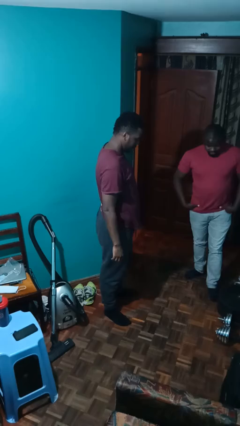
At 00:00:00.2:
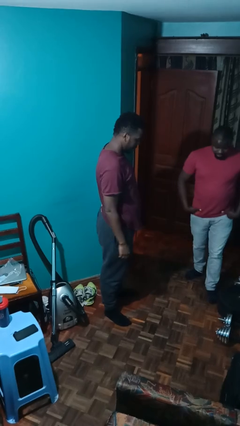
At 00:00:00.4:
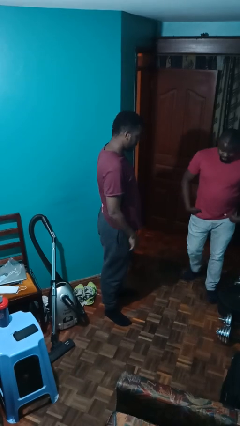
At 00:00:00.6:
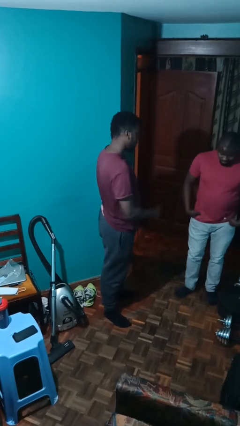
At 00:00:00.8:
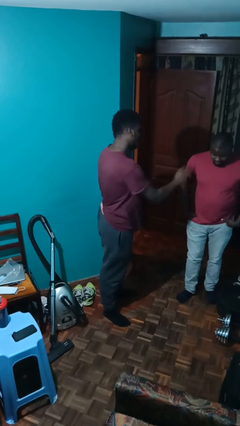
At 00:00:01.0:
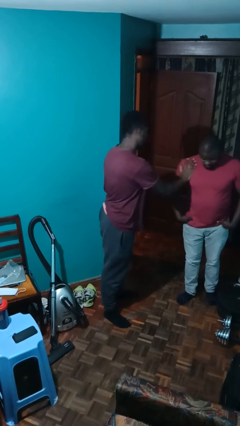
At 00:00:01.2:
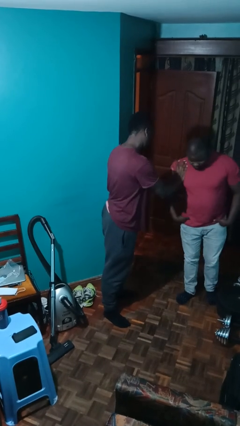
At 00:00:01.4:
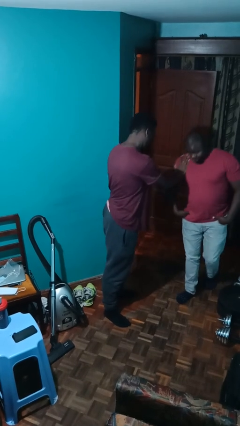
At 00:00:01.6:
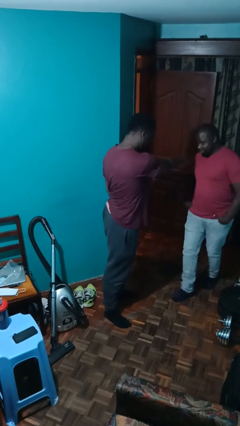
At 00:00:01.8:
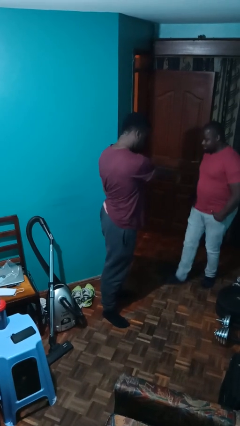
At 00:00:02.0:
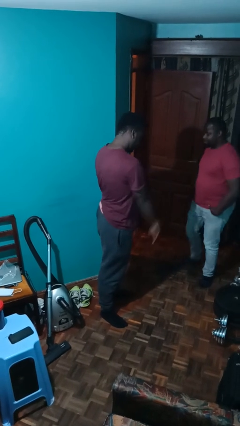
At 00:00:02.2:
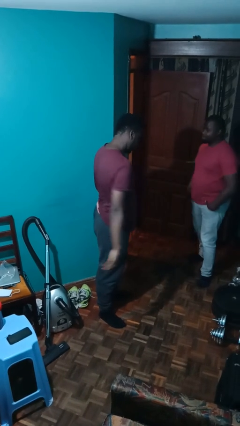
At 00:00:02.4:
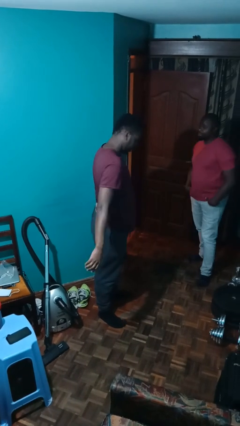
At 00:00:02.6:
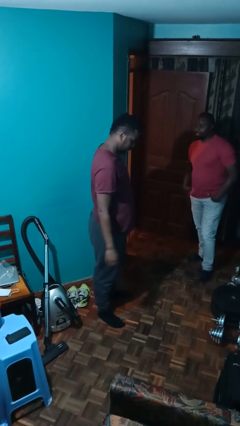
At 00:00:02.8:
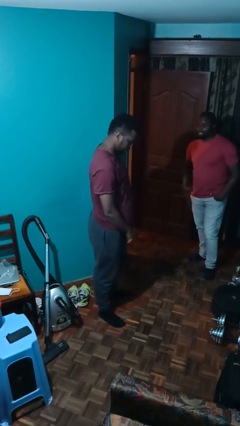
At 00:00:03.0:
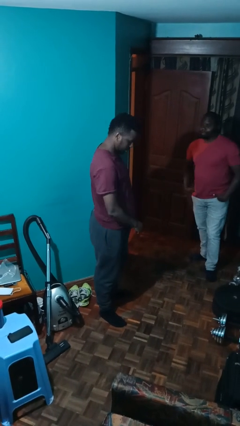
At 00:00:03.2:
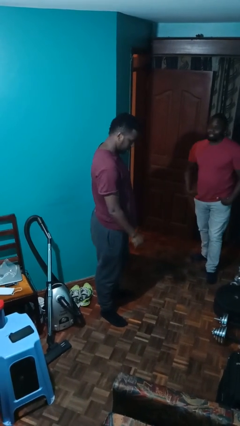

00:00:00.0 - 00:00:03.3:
person shoves person

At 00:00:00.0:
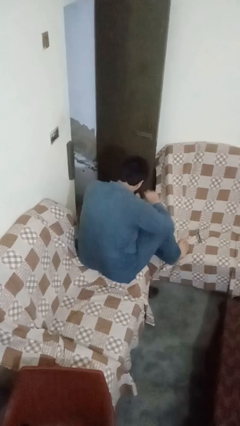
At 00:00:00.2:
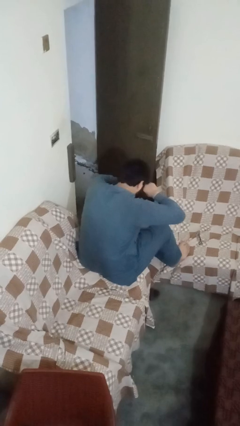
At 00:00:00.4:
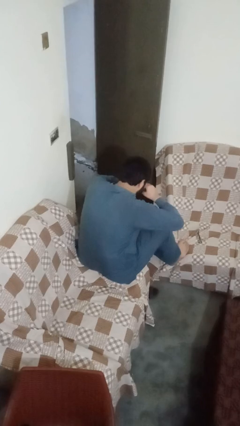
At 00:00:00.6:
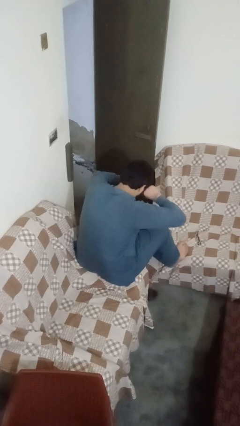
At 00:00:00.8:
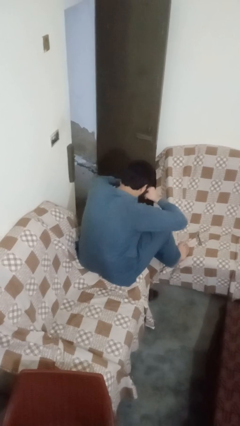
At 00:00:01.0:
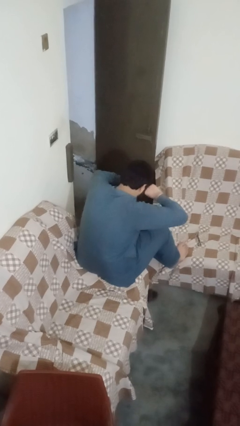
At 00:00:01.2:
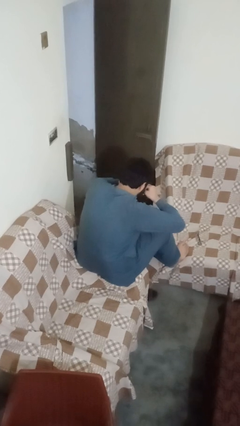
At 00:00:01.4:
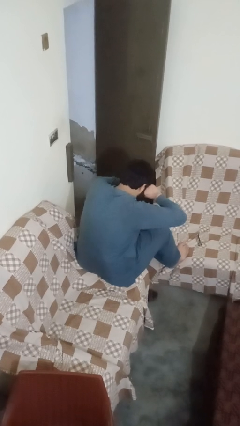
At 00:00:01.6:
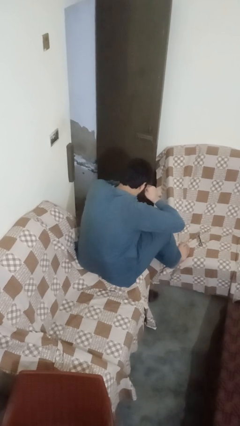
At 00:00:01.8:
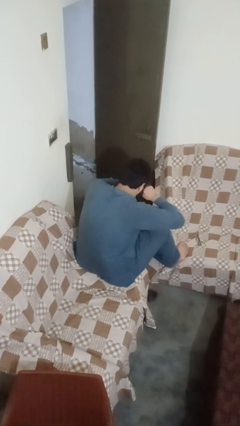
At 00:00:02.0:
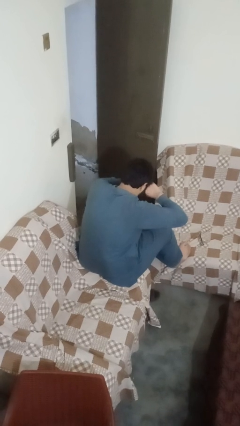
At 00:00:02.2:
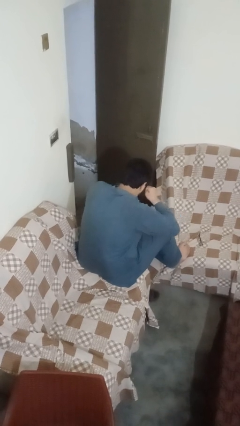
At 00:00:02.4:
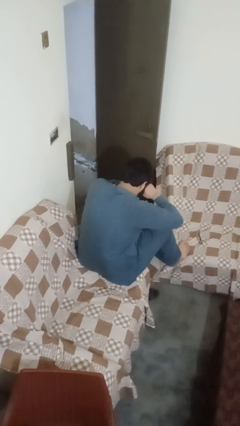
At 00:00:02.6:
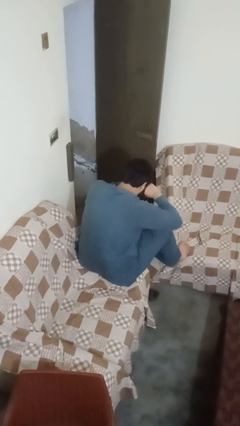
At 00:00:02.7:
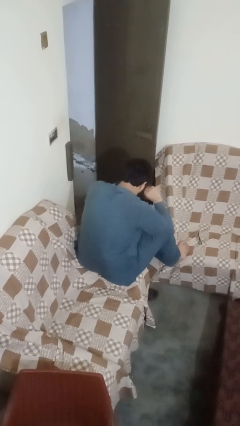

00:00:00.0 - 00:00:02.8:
person rubs eyes

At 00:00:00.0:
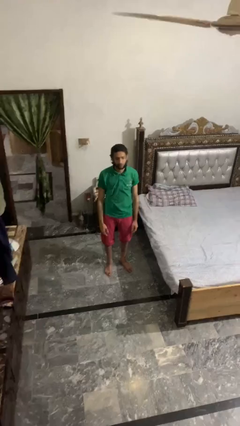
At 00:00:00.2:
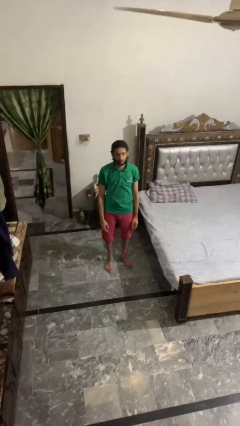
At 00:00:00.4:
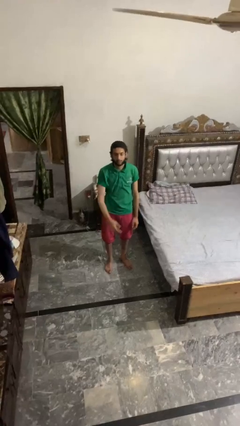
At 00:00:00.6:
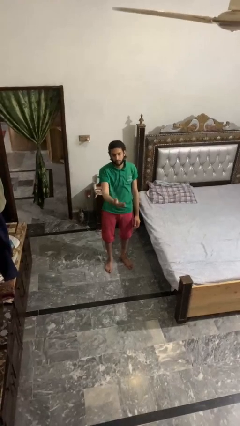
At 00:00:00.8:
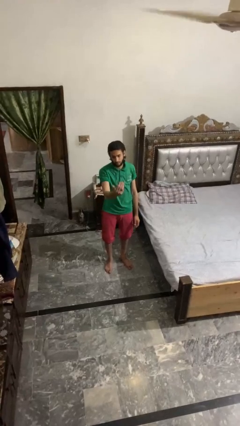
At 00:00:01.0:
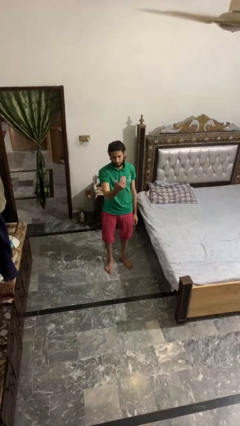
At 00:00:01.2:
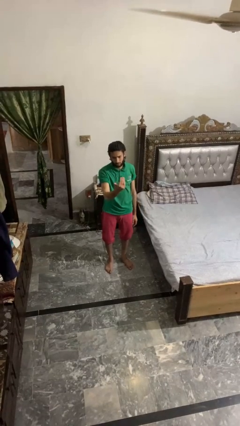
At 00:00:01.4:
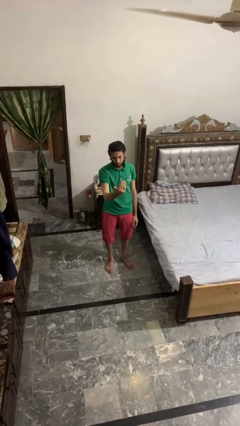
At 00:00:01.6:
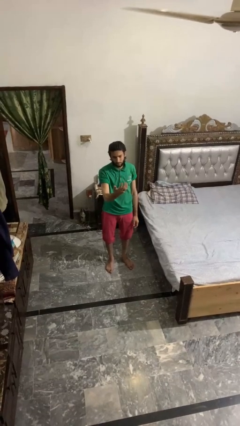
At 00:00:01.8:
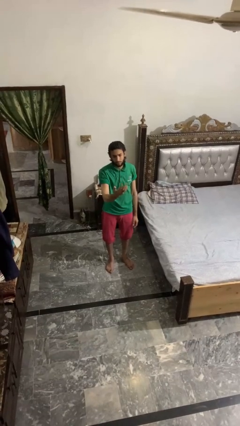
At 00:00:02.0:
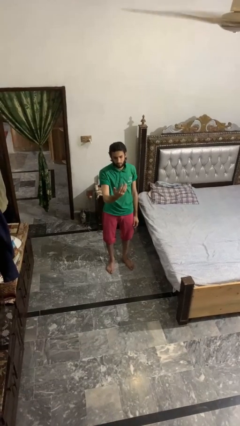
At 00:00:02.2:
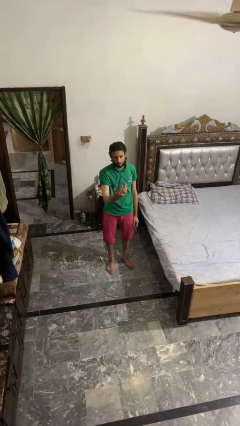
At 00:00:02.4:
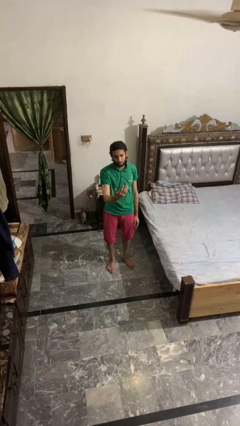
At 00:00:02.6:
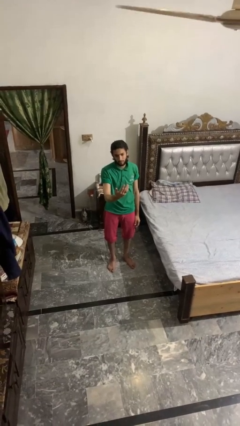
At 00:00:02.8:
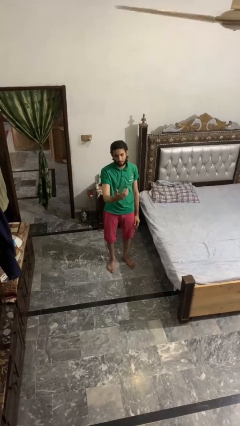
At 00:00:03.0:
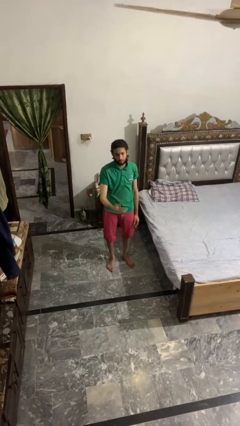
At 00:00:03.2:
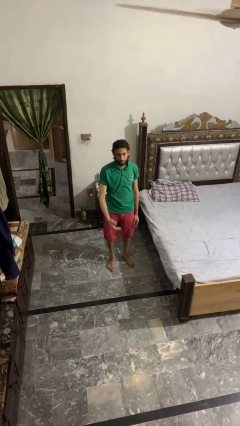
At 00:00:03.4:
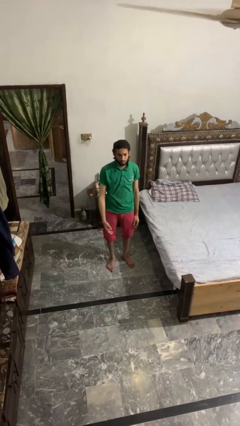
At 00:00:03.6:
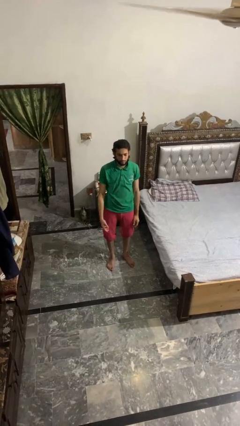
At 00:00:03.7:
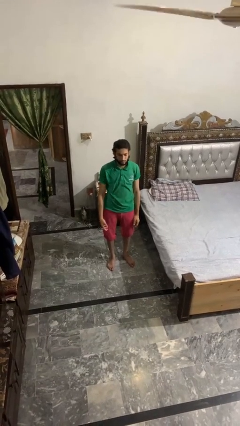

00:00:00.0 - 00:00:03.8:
person gestures come here

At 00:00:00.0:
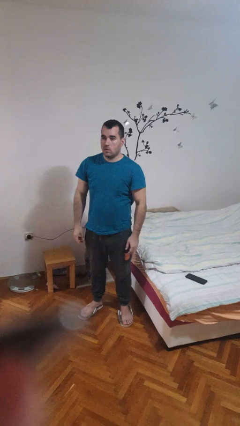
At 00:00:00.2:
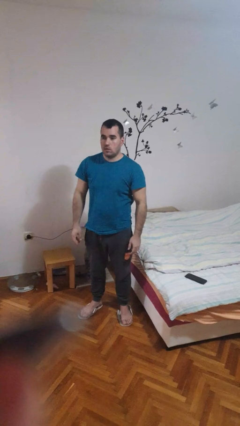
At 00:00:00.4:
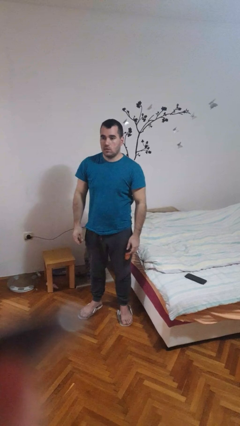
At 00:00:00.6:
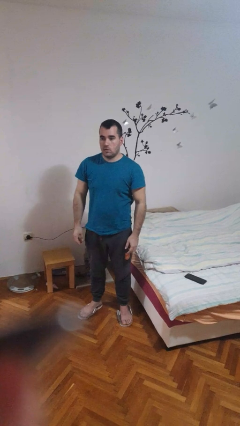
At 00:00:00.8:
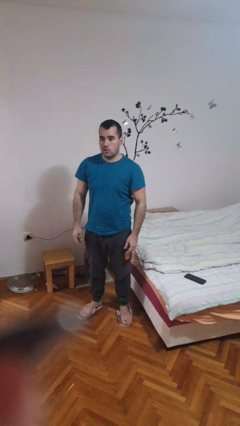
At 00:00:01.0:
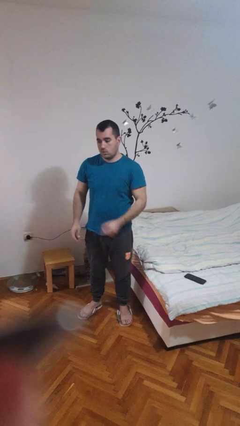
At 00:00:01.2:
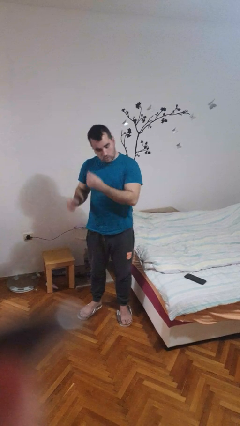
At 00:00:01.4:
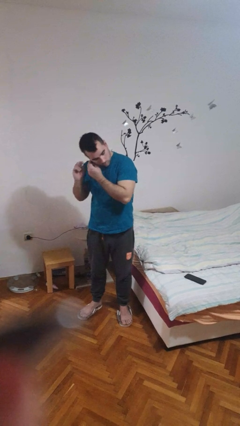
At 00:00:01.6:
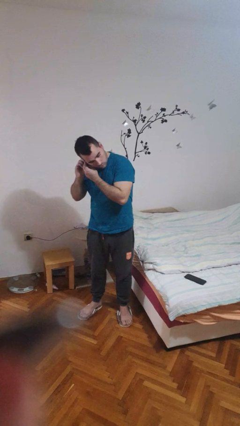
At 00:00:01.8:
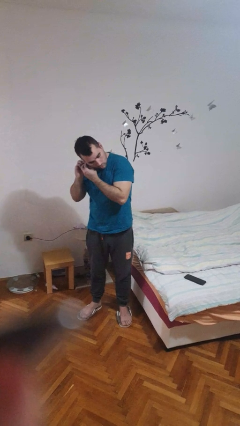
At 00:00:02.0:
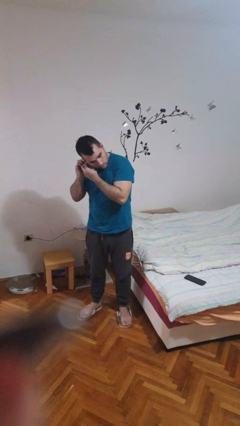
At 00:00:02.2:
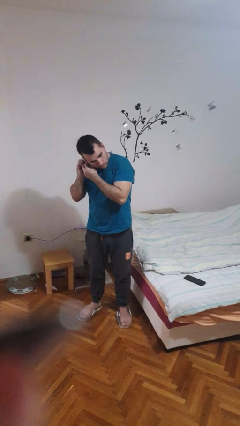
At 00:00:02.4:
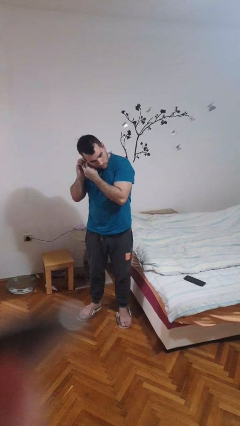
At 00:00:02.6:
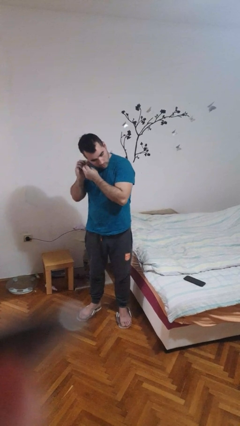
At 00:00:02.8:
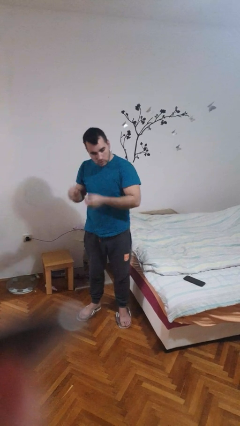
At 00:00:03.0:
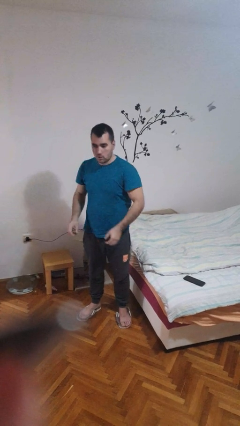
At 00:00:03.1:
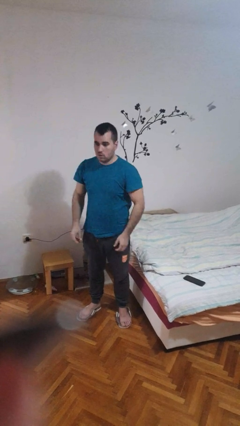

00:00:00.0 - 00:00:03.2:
person takes off earrings

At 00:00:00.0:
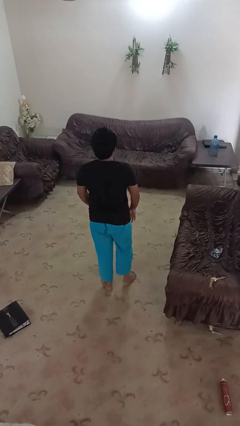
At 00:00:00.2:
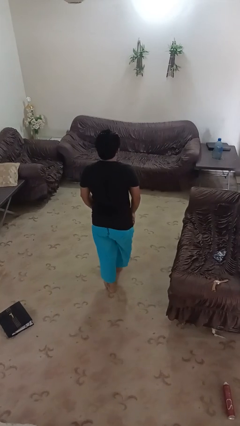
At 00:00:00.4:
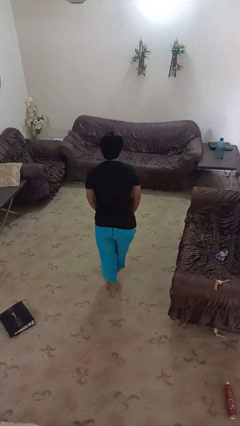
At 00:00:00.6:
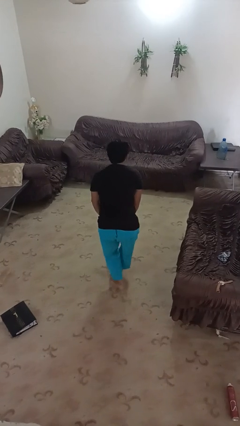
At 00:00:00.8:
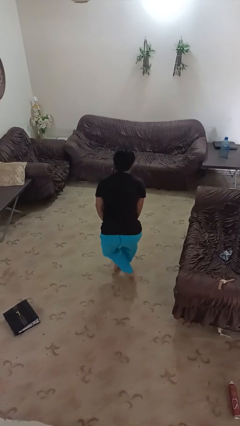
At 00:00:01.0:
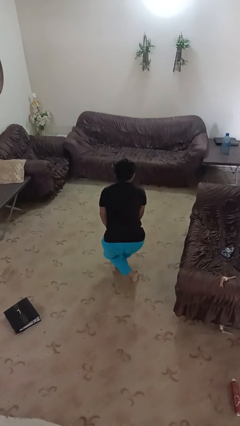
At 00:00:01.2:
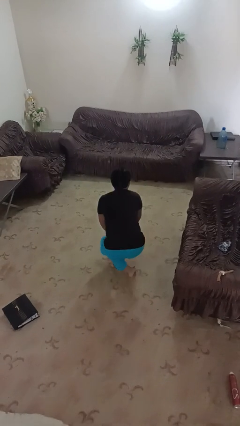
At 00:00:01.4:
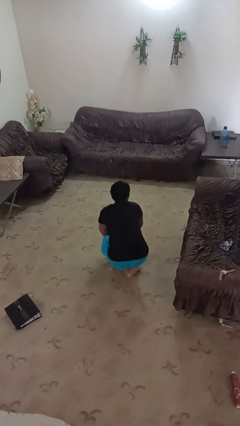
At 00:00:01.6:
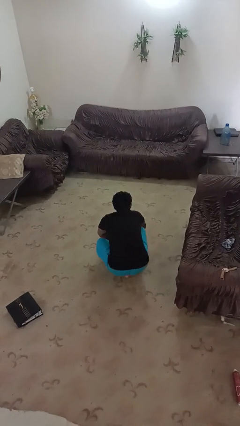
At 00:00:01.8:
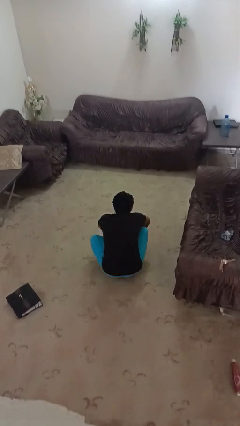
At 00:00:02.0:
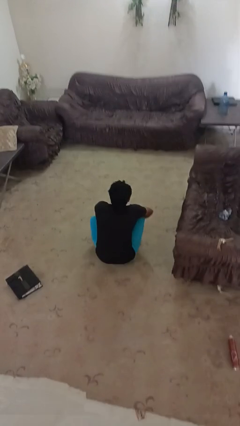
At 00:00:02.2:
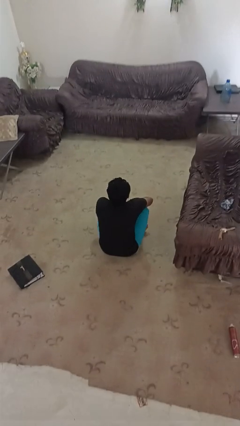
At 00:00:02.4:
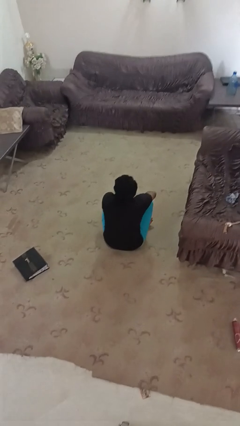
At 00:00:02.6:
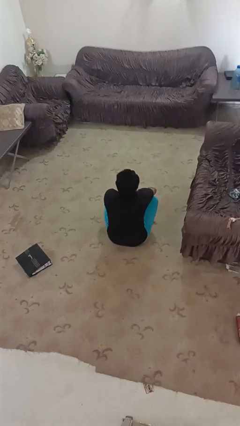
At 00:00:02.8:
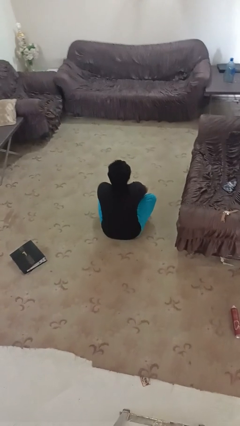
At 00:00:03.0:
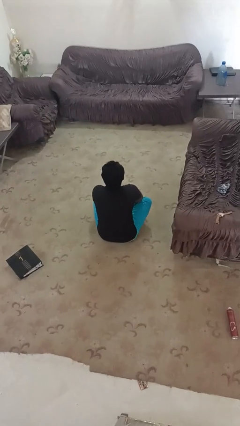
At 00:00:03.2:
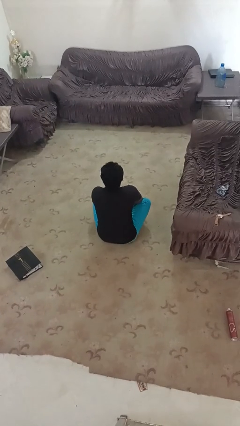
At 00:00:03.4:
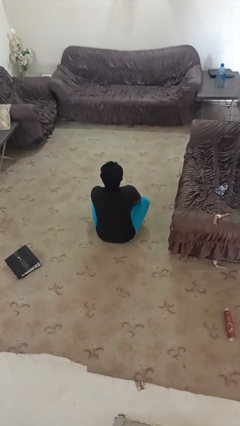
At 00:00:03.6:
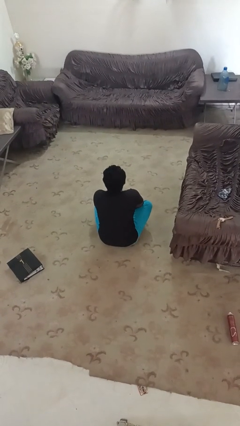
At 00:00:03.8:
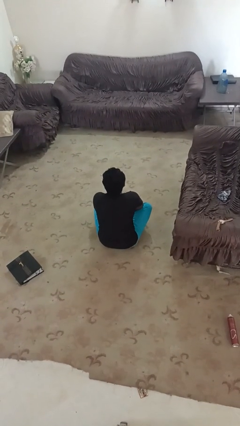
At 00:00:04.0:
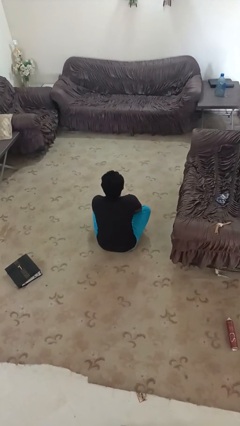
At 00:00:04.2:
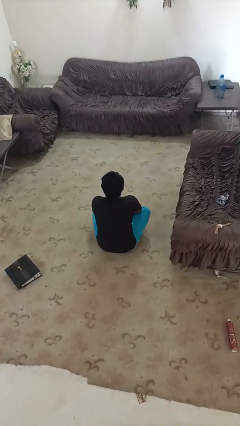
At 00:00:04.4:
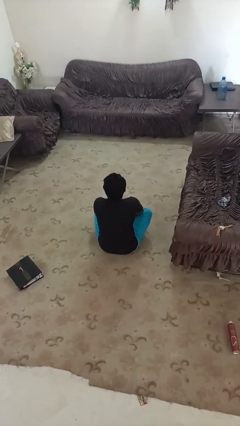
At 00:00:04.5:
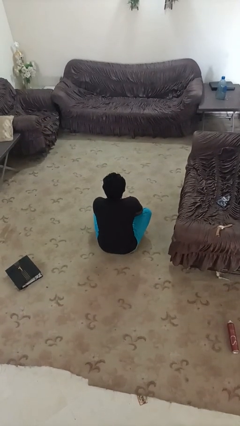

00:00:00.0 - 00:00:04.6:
person sits crisscross
